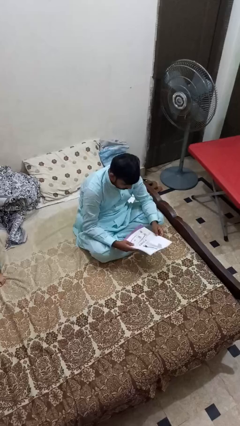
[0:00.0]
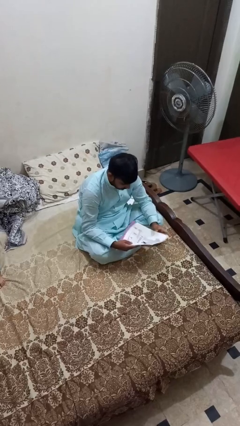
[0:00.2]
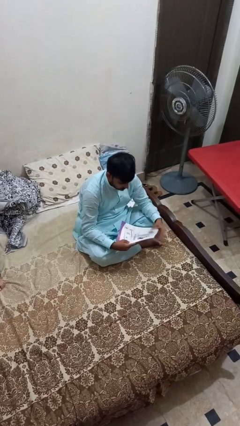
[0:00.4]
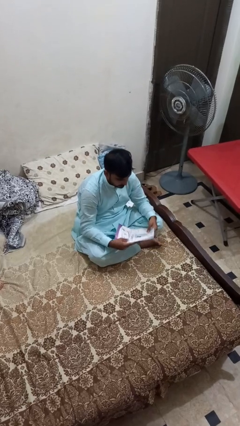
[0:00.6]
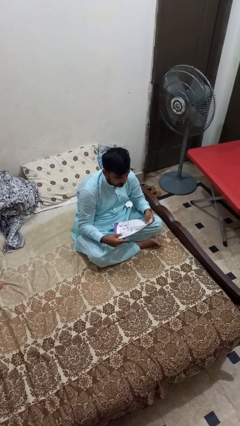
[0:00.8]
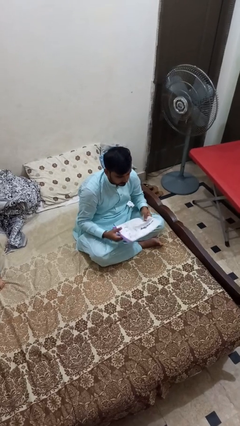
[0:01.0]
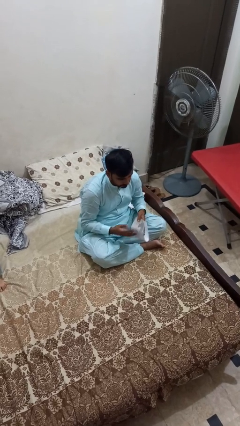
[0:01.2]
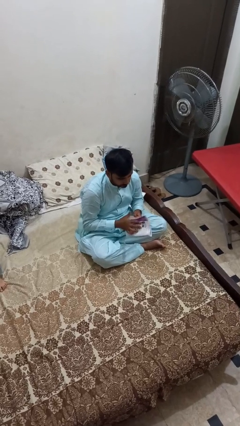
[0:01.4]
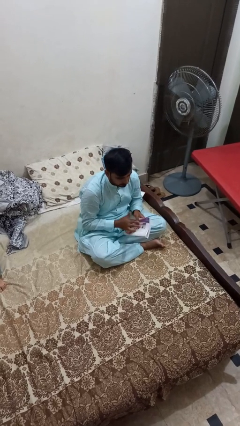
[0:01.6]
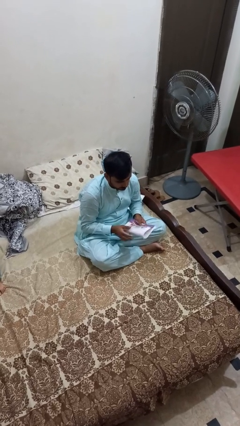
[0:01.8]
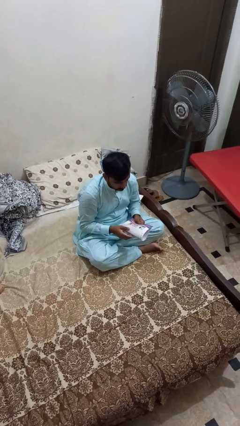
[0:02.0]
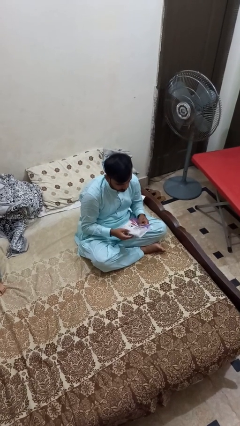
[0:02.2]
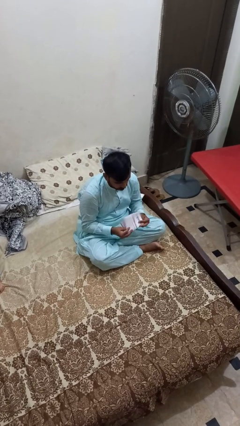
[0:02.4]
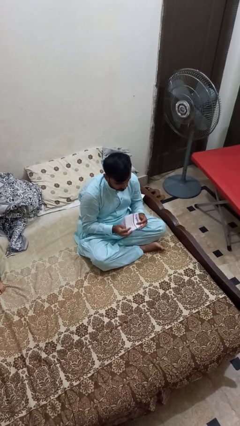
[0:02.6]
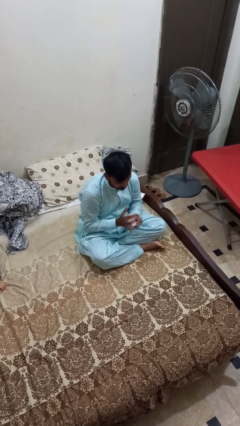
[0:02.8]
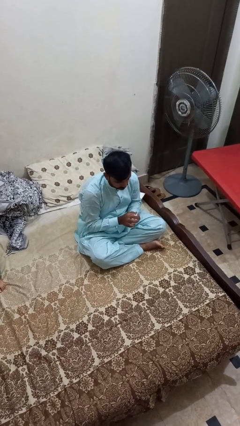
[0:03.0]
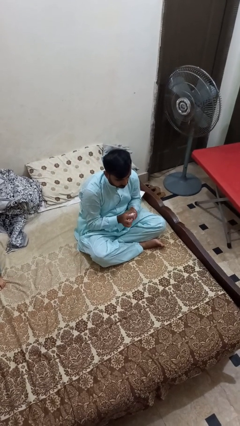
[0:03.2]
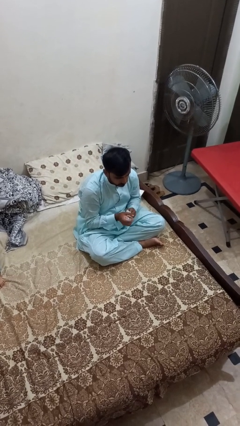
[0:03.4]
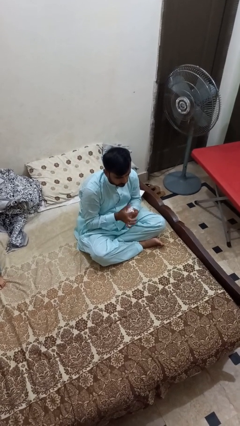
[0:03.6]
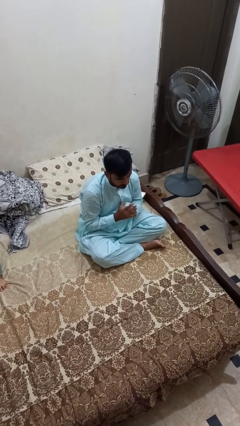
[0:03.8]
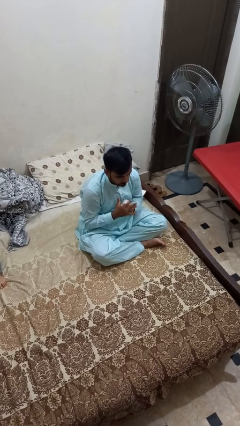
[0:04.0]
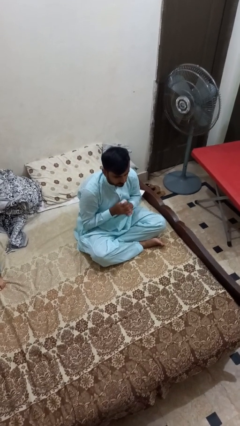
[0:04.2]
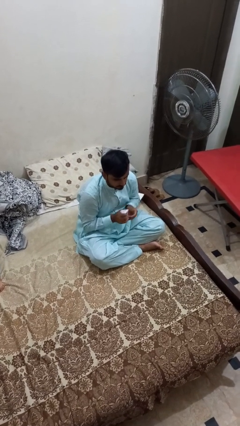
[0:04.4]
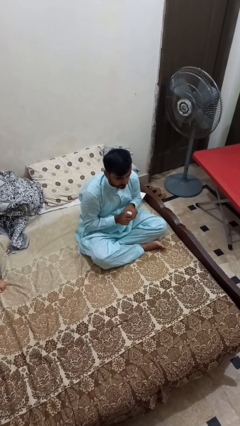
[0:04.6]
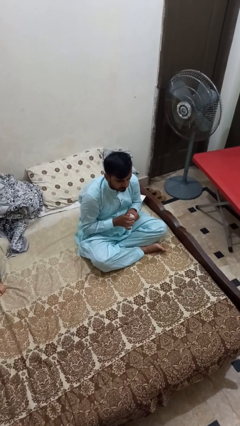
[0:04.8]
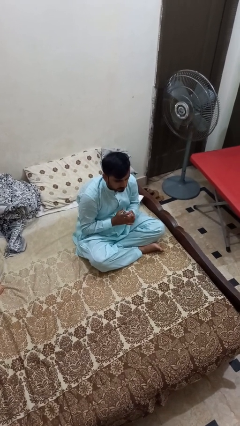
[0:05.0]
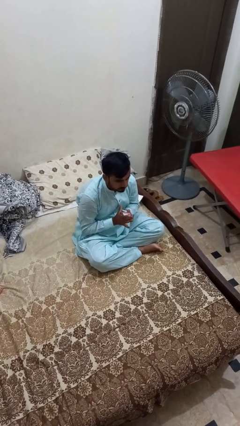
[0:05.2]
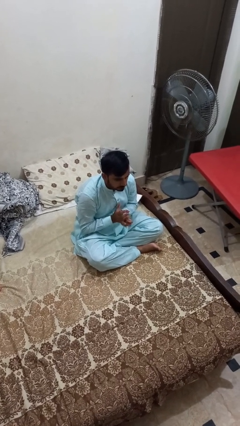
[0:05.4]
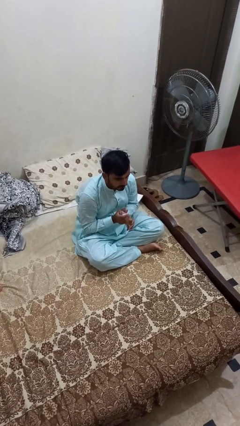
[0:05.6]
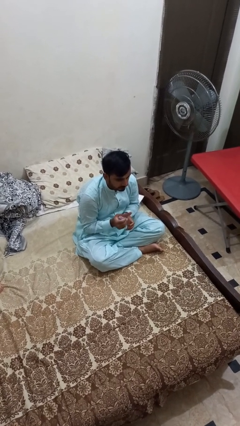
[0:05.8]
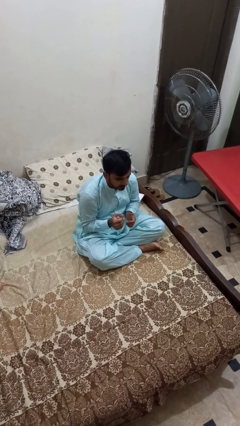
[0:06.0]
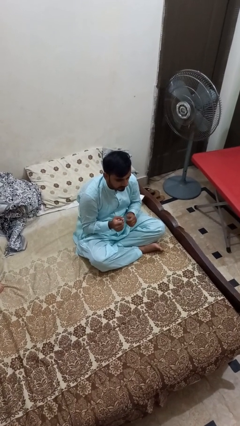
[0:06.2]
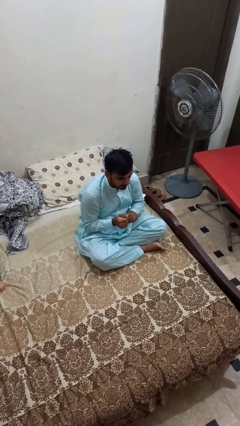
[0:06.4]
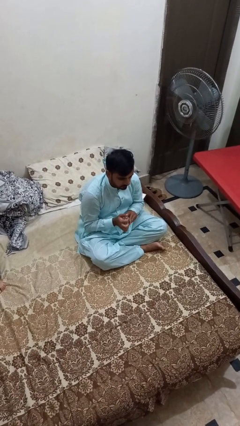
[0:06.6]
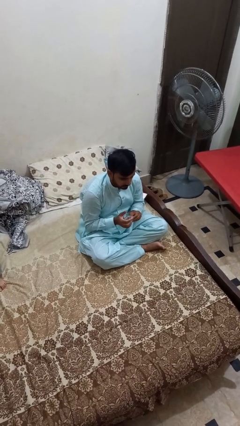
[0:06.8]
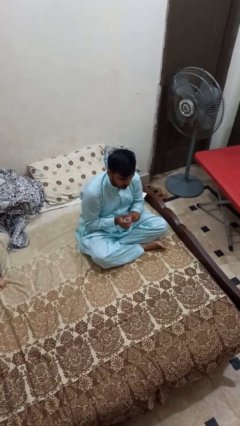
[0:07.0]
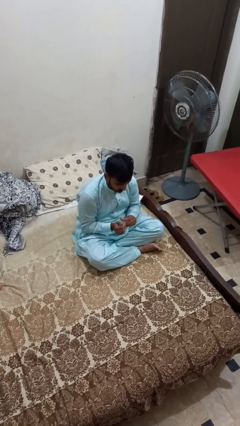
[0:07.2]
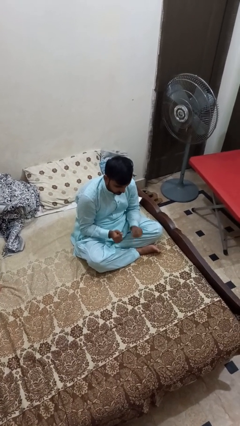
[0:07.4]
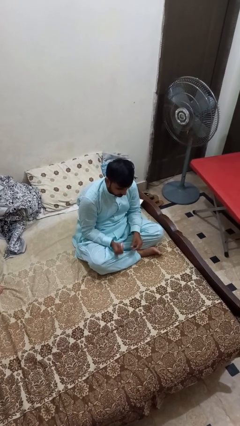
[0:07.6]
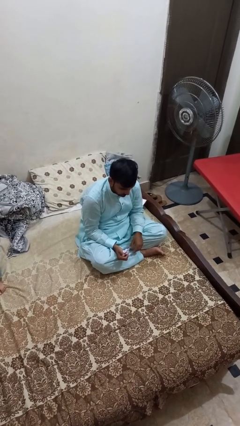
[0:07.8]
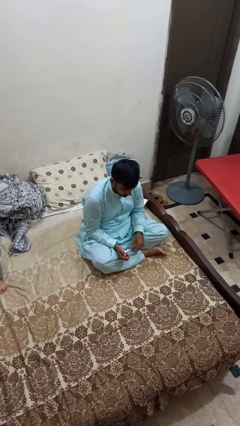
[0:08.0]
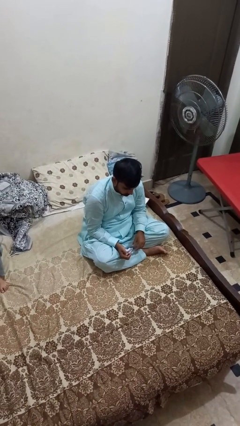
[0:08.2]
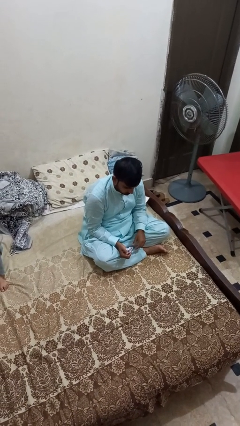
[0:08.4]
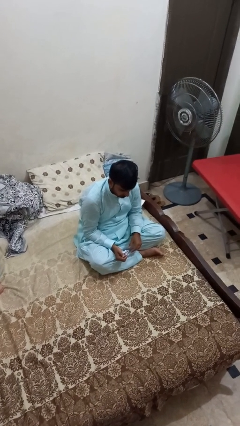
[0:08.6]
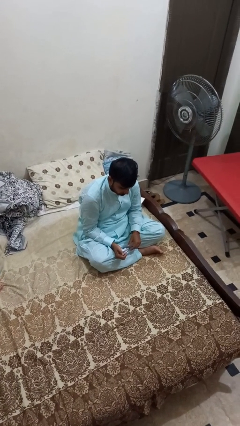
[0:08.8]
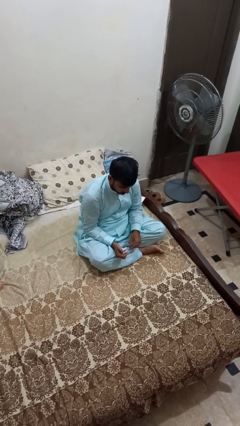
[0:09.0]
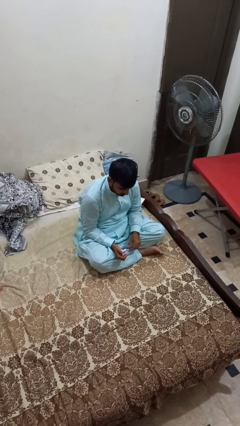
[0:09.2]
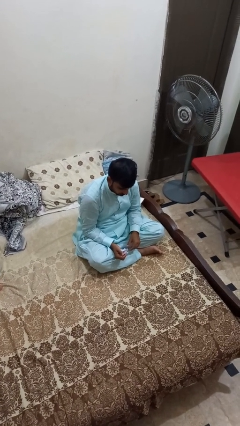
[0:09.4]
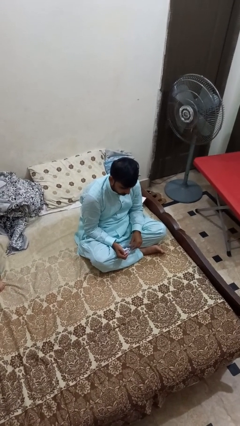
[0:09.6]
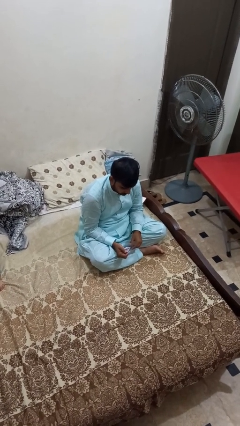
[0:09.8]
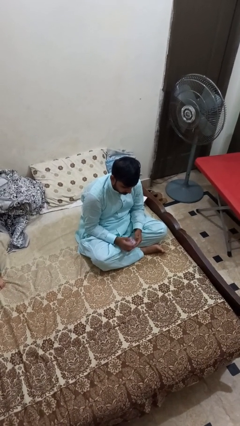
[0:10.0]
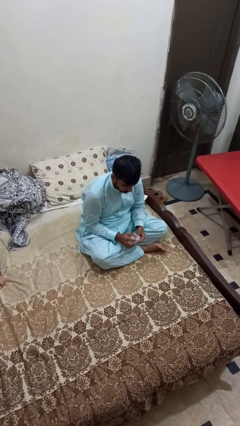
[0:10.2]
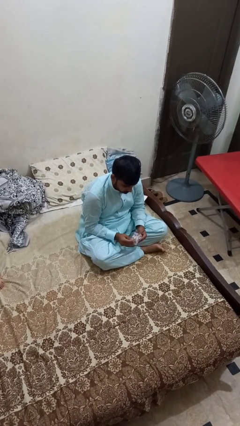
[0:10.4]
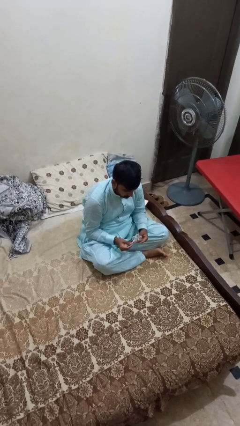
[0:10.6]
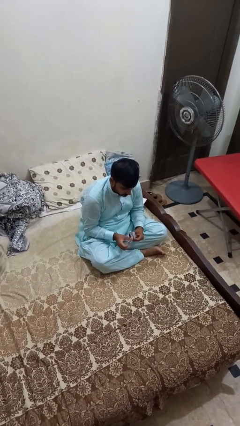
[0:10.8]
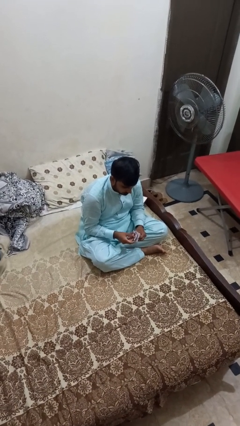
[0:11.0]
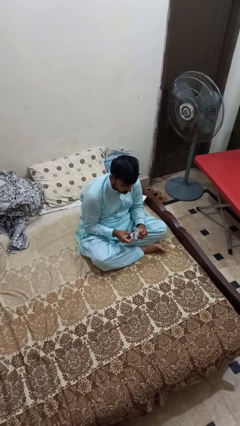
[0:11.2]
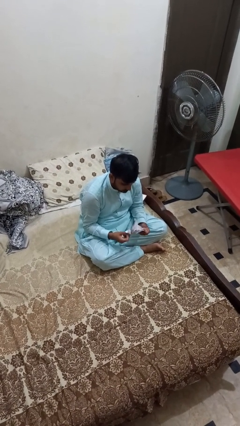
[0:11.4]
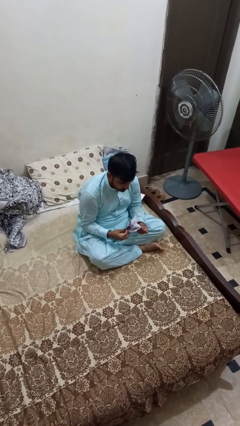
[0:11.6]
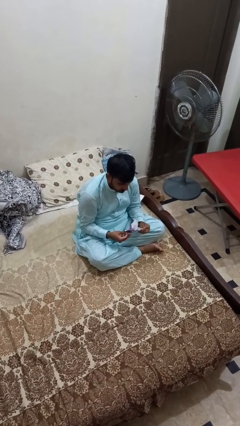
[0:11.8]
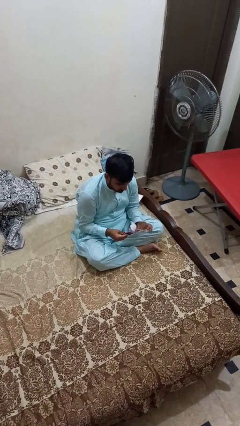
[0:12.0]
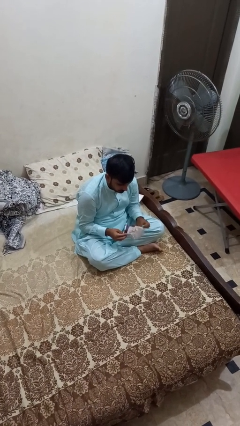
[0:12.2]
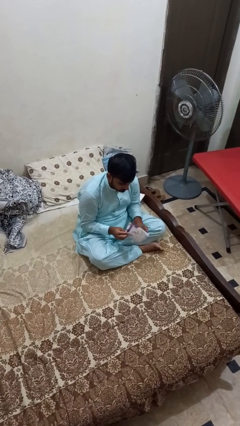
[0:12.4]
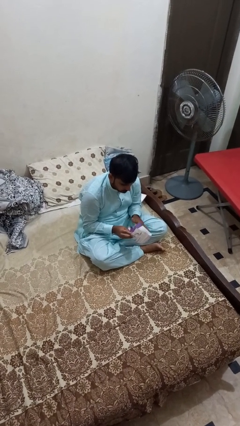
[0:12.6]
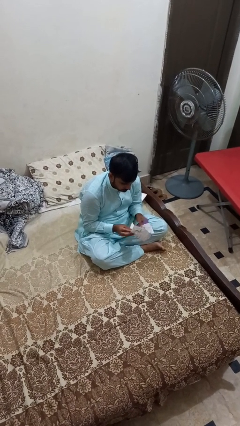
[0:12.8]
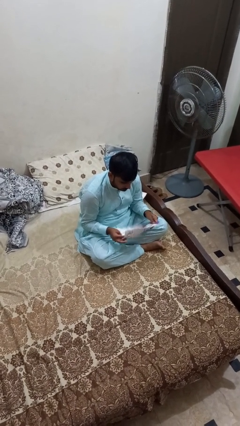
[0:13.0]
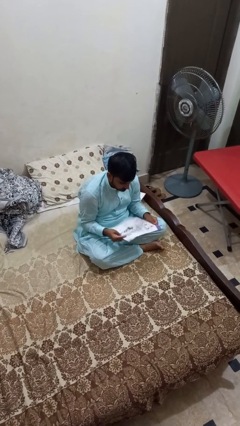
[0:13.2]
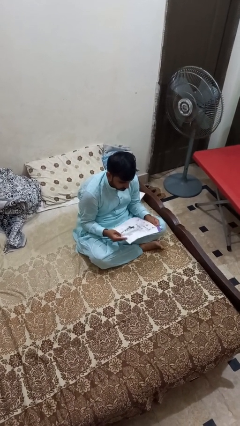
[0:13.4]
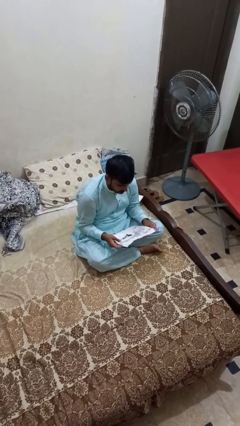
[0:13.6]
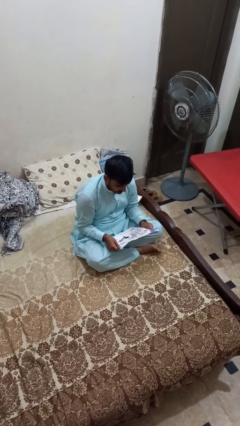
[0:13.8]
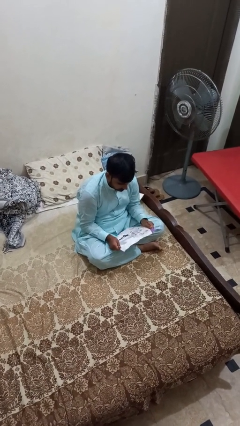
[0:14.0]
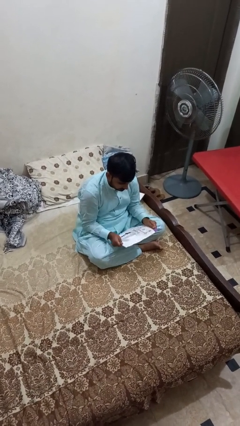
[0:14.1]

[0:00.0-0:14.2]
person crumples paper

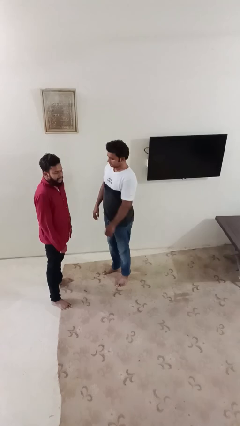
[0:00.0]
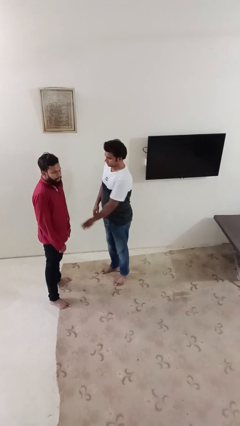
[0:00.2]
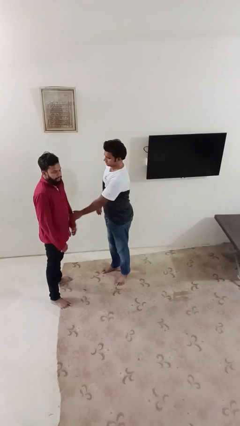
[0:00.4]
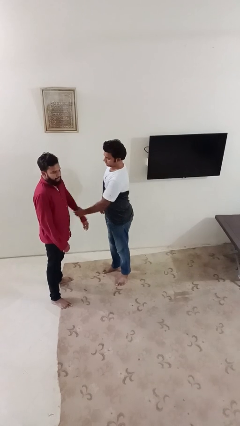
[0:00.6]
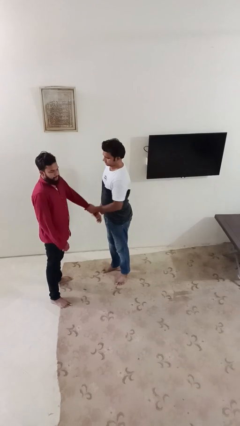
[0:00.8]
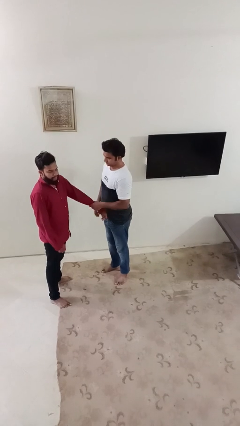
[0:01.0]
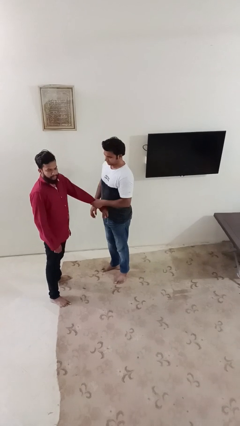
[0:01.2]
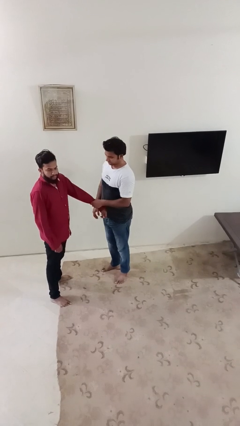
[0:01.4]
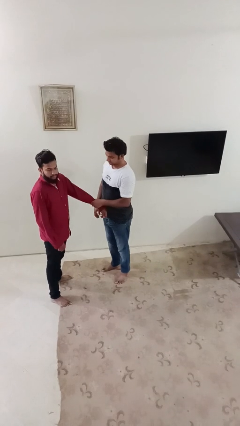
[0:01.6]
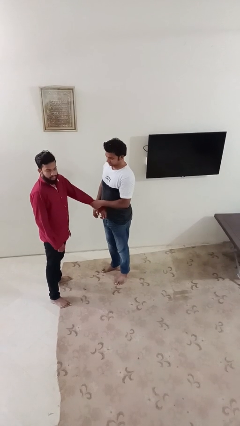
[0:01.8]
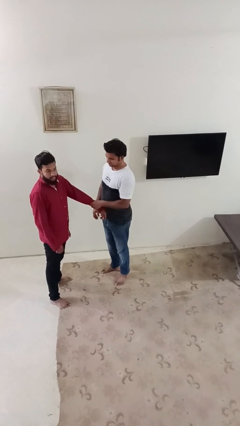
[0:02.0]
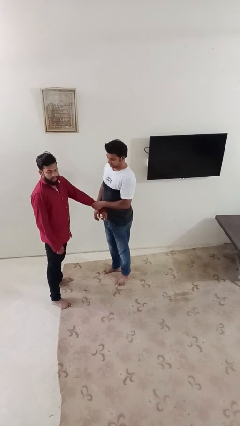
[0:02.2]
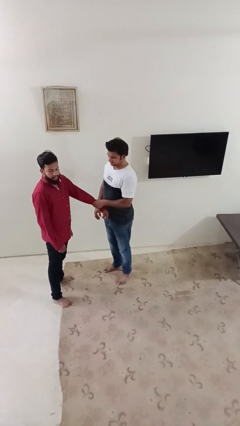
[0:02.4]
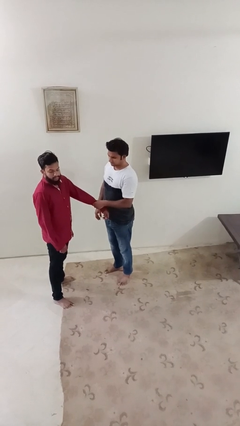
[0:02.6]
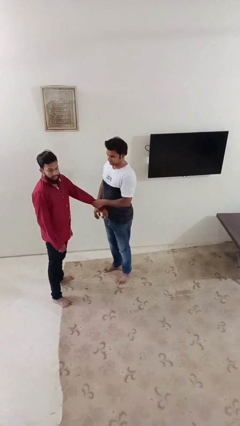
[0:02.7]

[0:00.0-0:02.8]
person grabs person by forearm

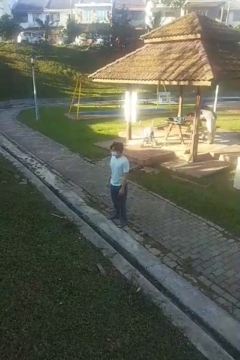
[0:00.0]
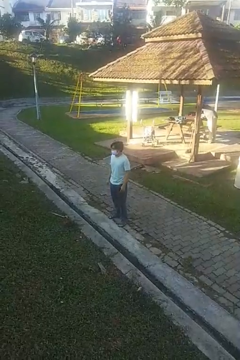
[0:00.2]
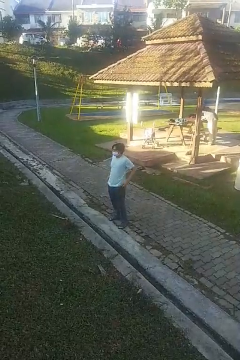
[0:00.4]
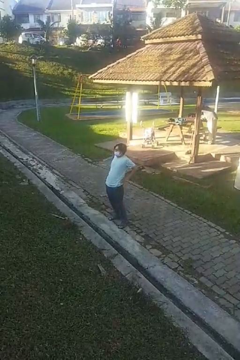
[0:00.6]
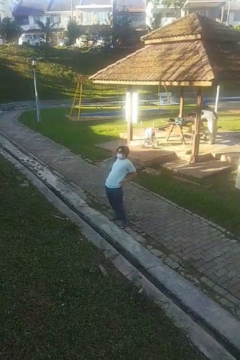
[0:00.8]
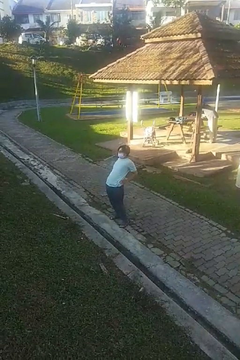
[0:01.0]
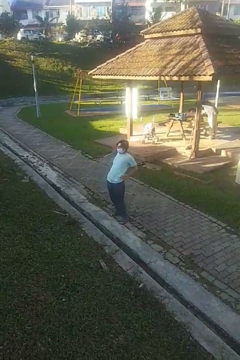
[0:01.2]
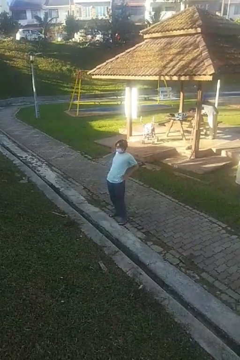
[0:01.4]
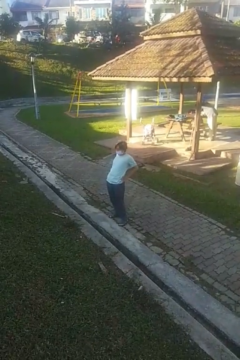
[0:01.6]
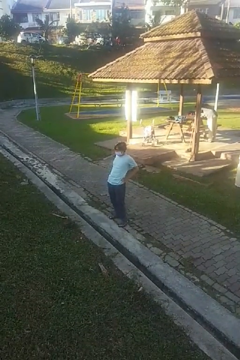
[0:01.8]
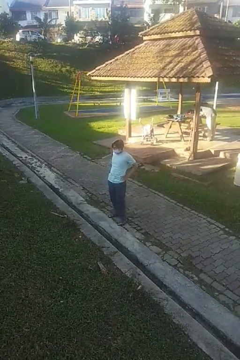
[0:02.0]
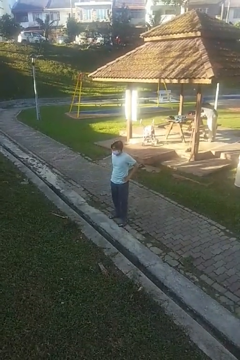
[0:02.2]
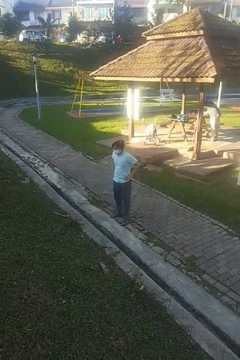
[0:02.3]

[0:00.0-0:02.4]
person stretches back
